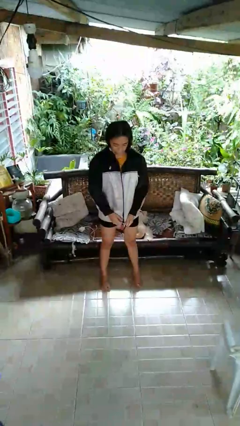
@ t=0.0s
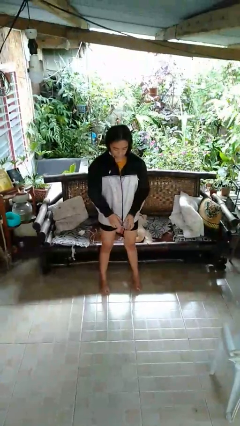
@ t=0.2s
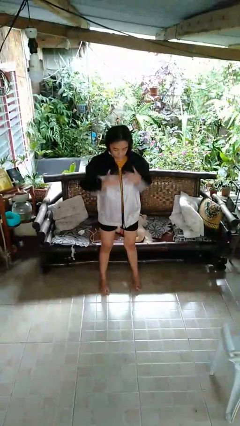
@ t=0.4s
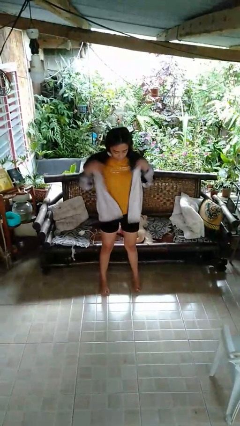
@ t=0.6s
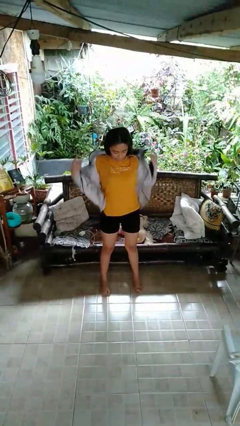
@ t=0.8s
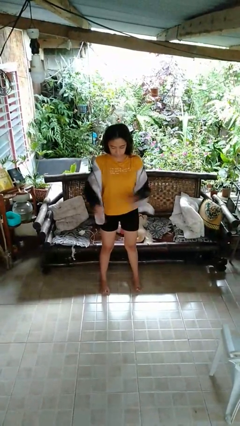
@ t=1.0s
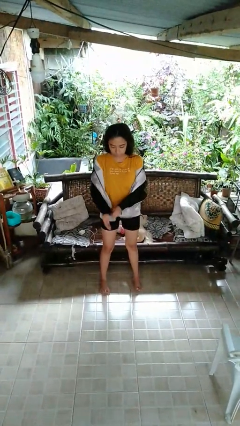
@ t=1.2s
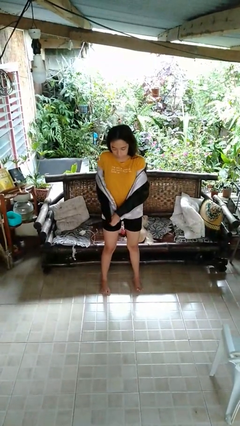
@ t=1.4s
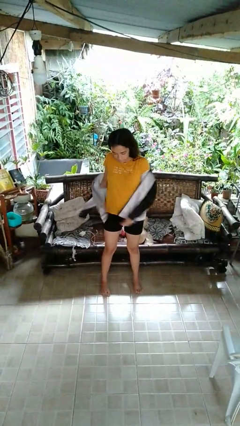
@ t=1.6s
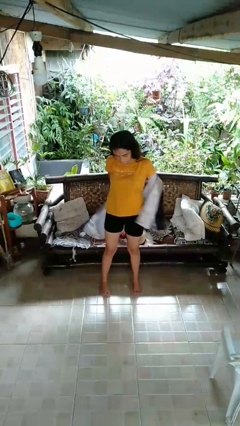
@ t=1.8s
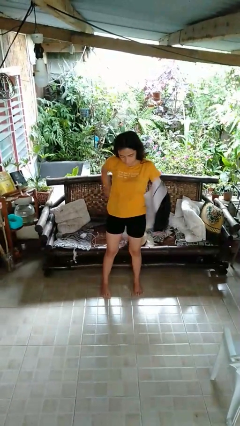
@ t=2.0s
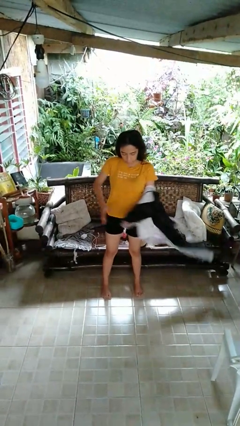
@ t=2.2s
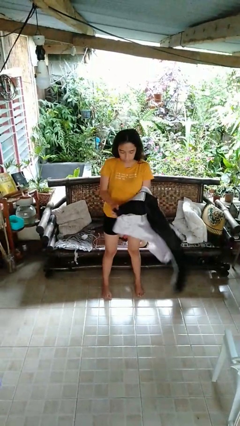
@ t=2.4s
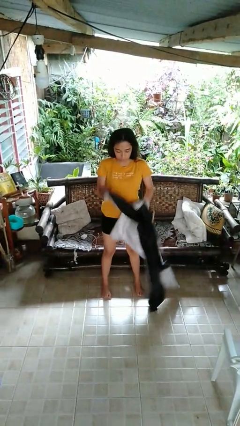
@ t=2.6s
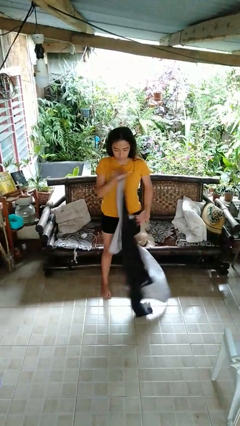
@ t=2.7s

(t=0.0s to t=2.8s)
person takes off jacket

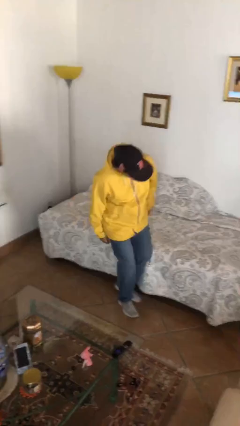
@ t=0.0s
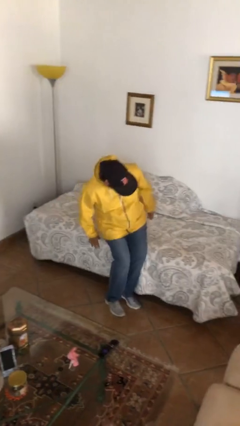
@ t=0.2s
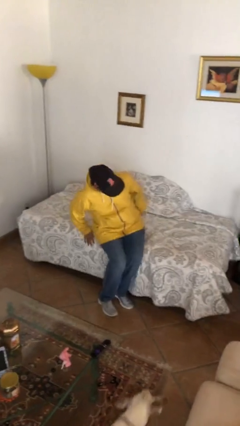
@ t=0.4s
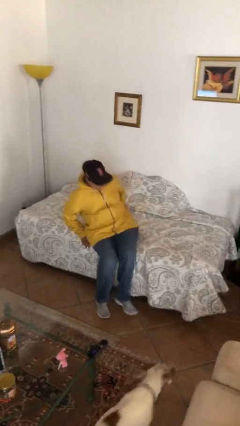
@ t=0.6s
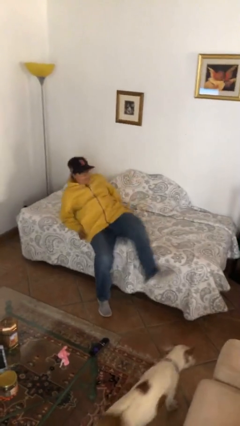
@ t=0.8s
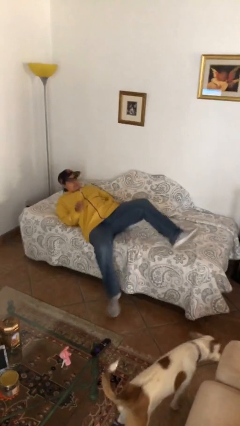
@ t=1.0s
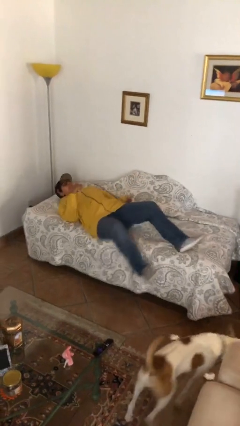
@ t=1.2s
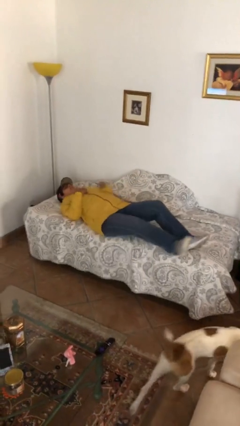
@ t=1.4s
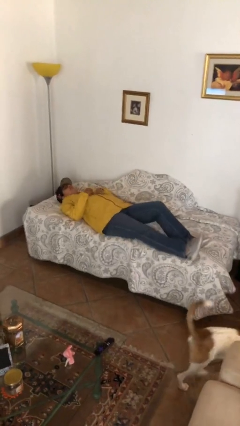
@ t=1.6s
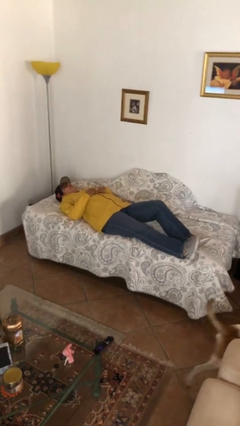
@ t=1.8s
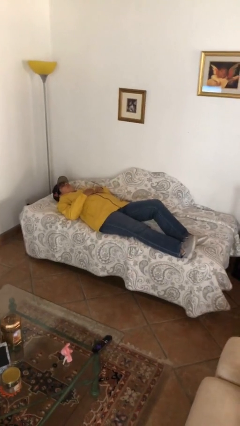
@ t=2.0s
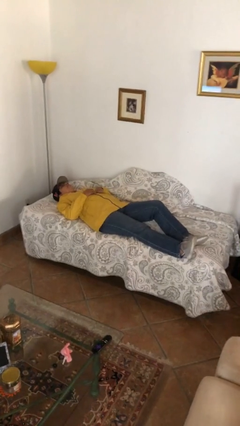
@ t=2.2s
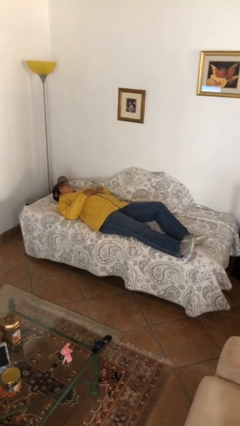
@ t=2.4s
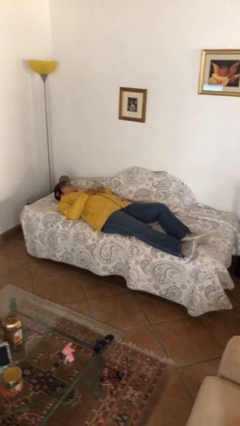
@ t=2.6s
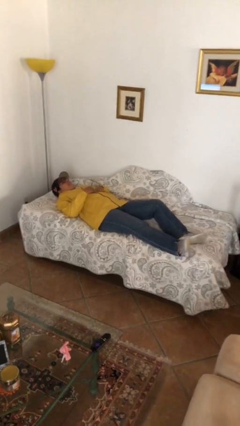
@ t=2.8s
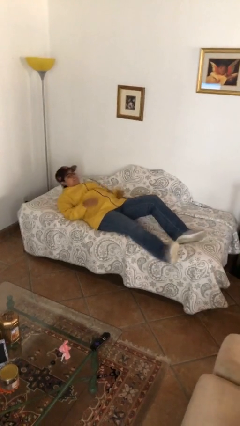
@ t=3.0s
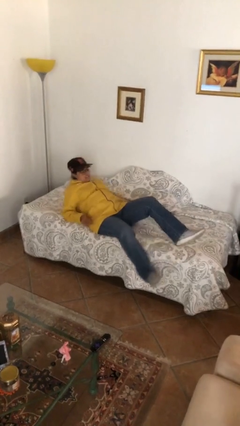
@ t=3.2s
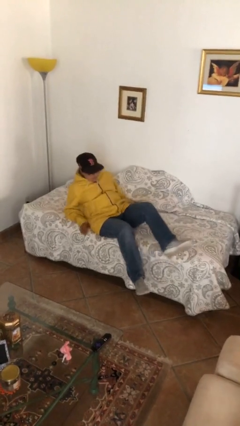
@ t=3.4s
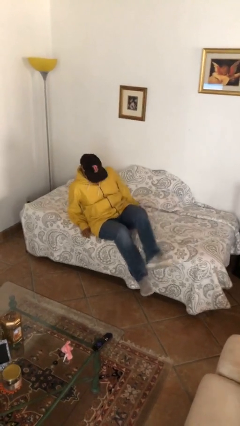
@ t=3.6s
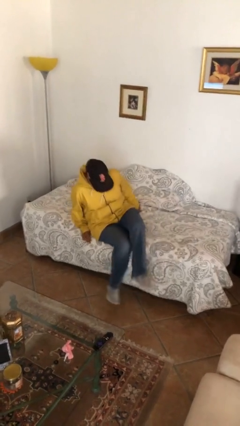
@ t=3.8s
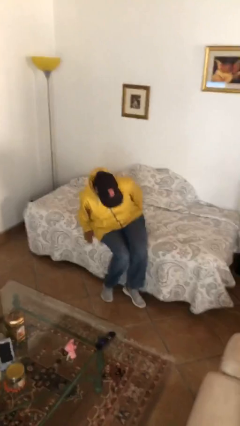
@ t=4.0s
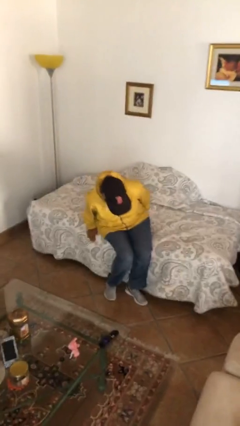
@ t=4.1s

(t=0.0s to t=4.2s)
person lies down on bed

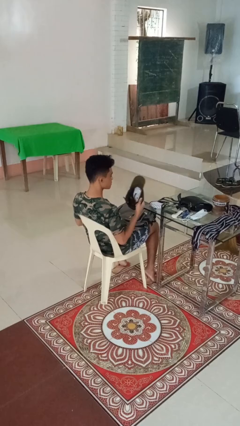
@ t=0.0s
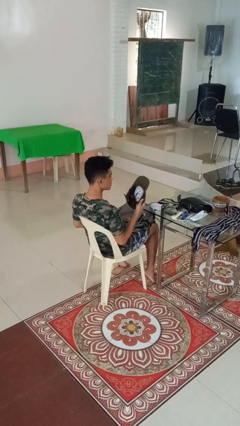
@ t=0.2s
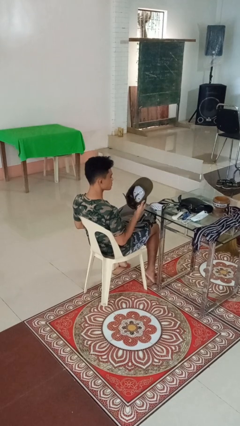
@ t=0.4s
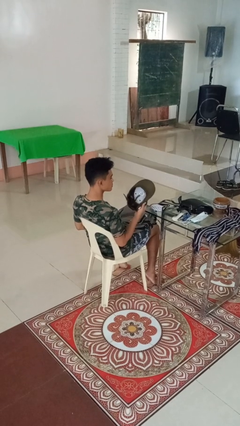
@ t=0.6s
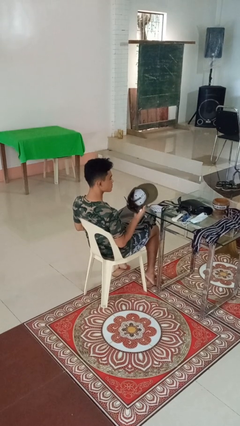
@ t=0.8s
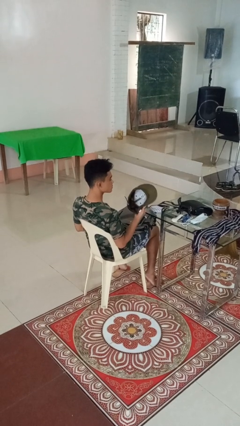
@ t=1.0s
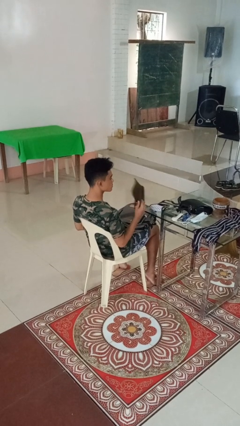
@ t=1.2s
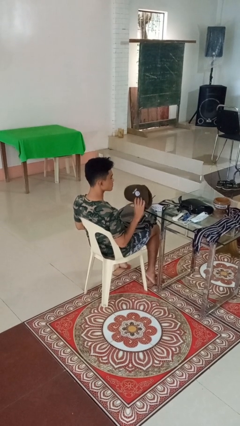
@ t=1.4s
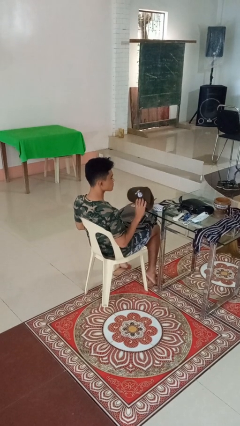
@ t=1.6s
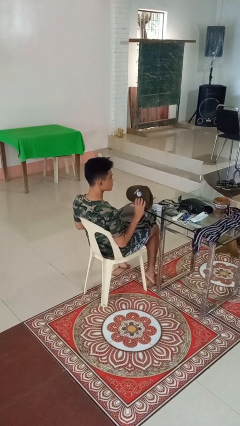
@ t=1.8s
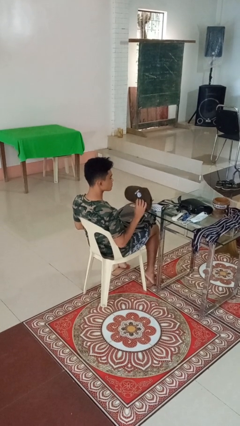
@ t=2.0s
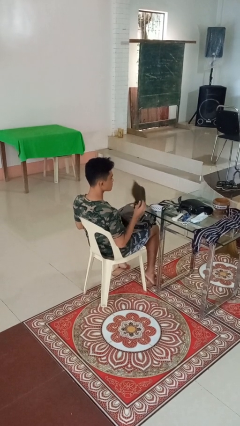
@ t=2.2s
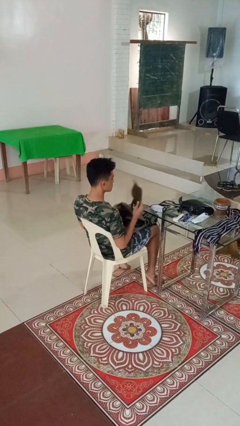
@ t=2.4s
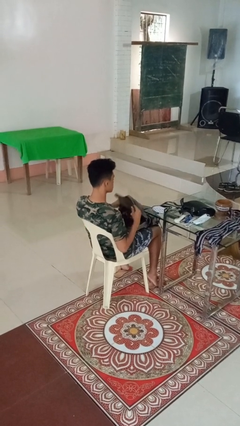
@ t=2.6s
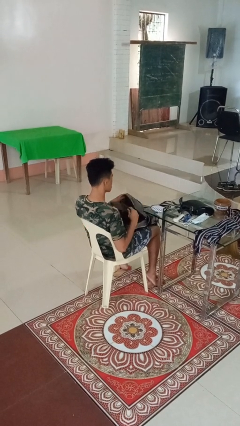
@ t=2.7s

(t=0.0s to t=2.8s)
person takes object from backpack

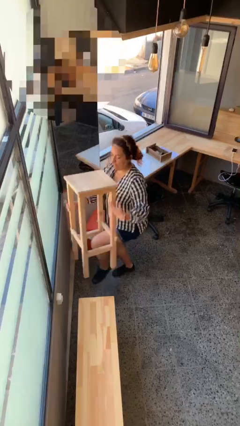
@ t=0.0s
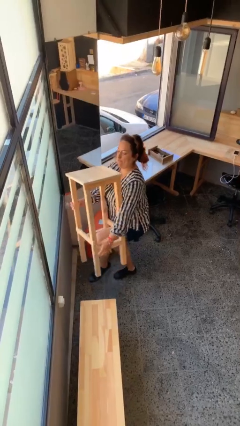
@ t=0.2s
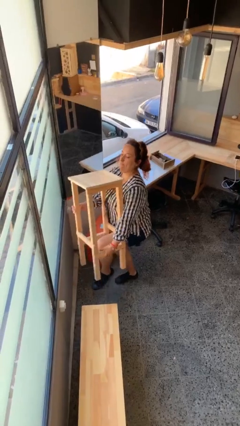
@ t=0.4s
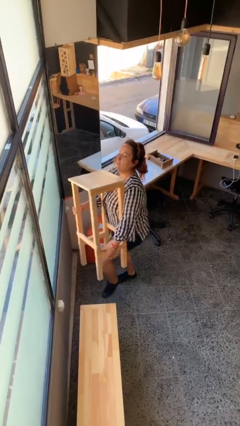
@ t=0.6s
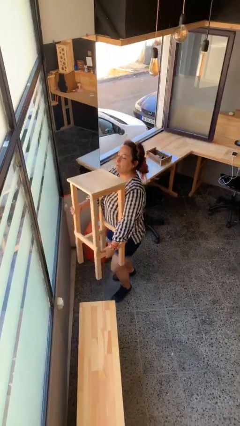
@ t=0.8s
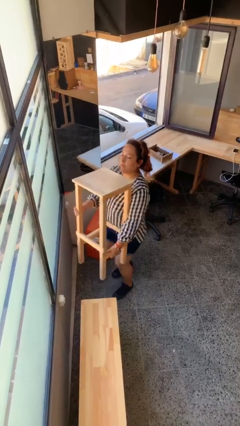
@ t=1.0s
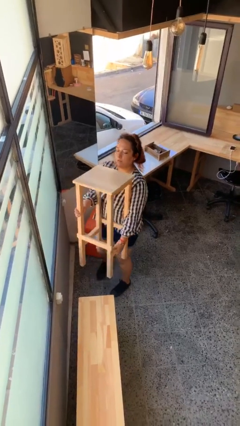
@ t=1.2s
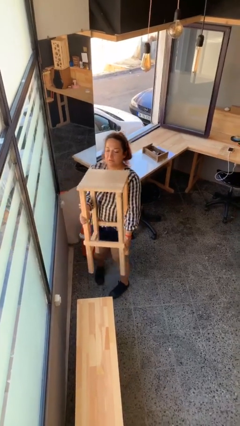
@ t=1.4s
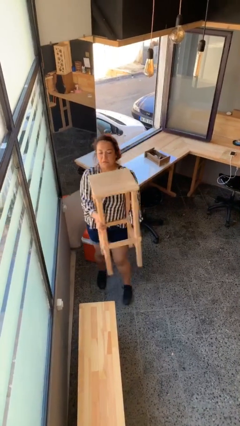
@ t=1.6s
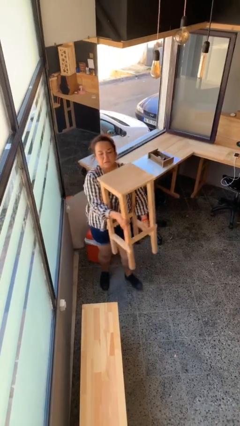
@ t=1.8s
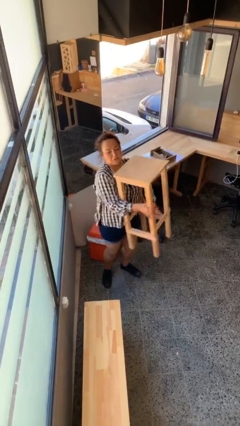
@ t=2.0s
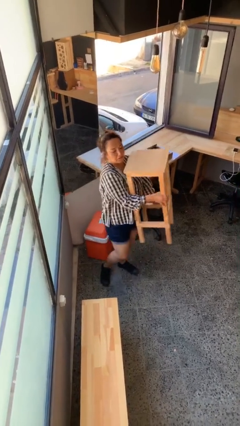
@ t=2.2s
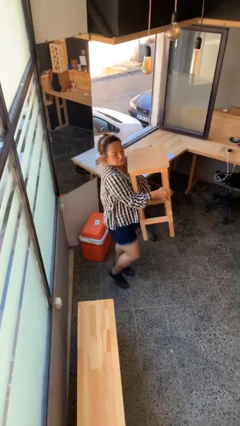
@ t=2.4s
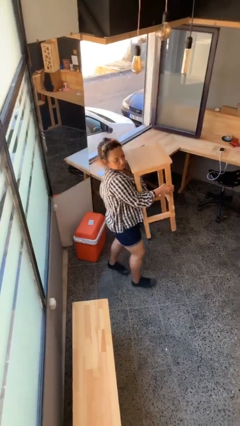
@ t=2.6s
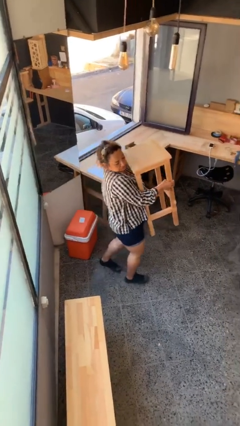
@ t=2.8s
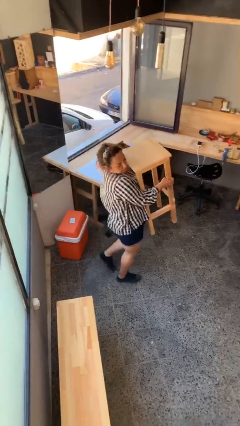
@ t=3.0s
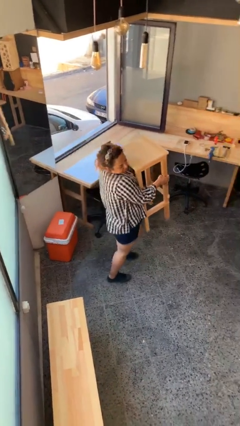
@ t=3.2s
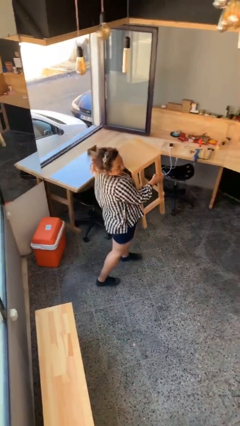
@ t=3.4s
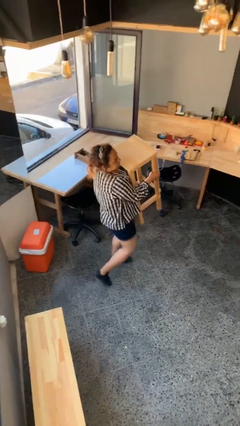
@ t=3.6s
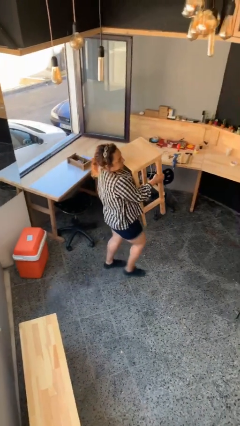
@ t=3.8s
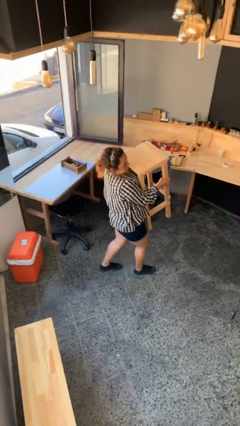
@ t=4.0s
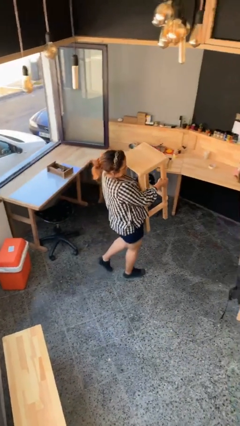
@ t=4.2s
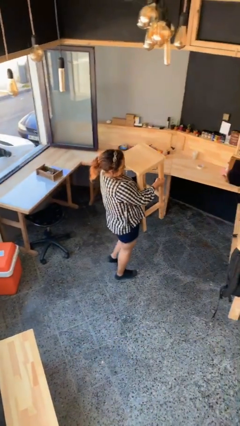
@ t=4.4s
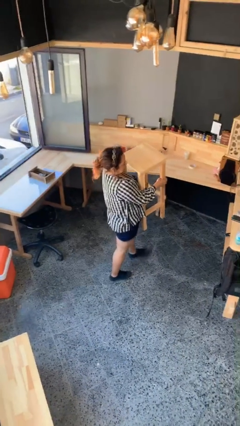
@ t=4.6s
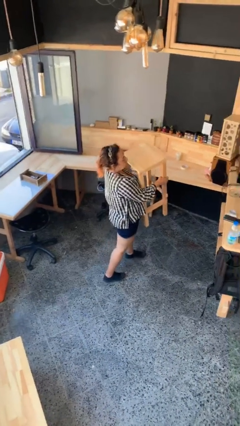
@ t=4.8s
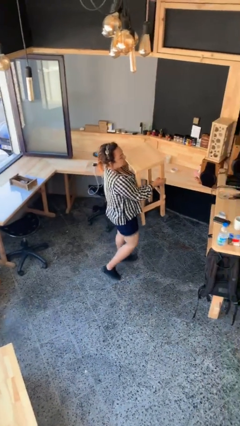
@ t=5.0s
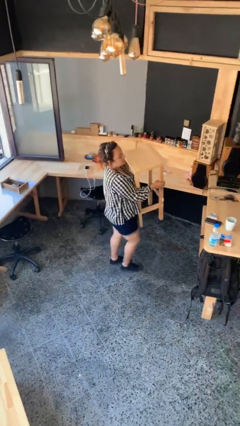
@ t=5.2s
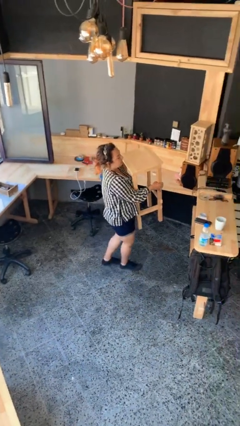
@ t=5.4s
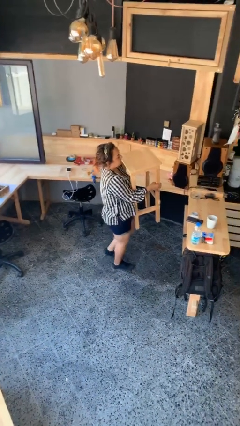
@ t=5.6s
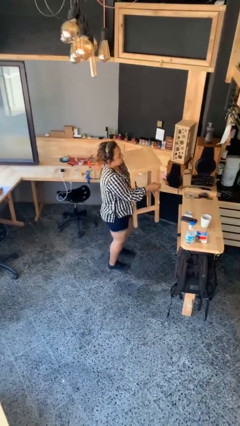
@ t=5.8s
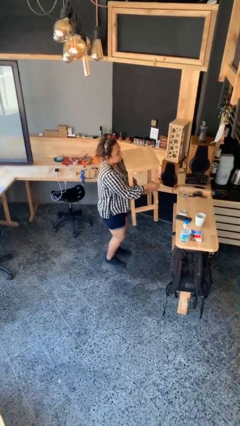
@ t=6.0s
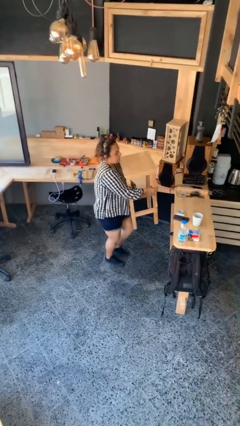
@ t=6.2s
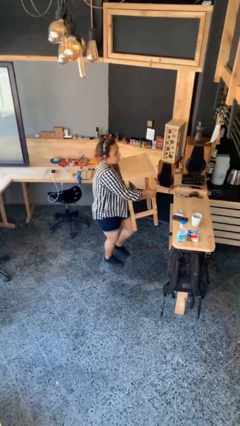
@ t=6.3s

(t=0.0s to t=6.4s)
person carries heavy object

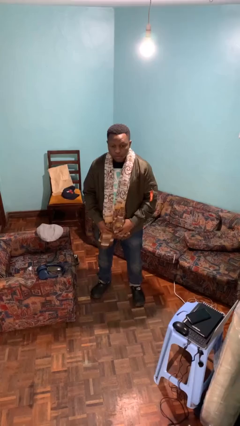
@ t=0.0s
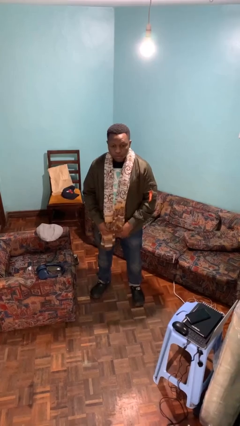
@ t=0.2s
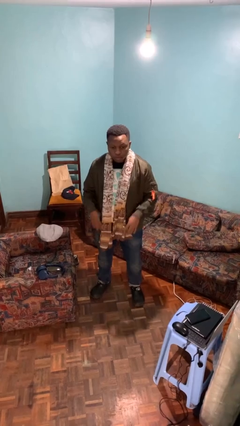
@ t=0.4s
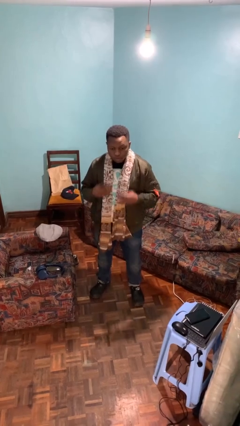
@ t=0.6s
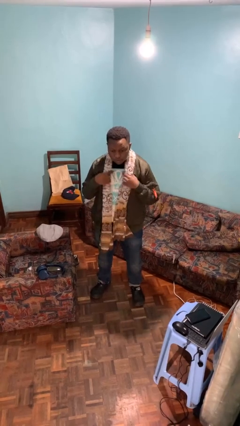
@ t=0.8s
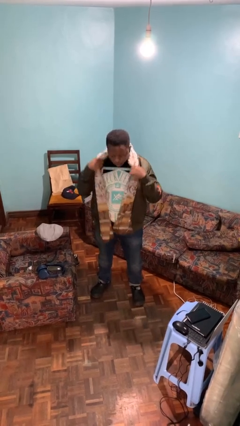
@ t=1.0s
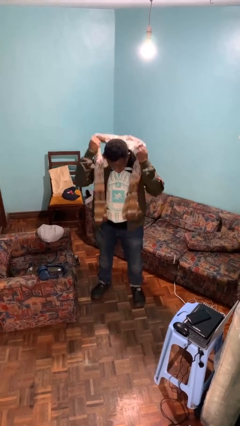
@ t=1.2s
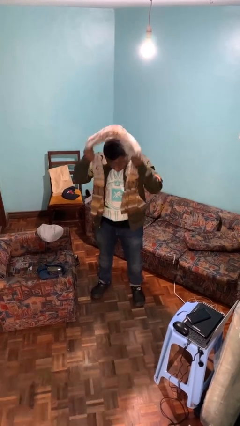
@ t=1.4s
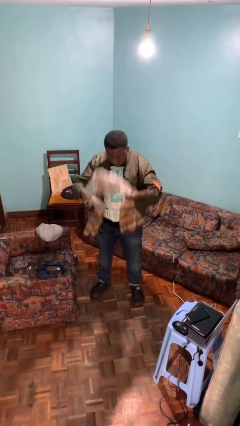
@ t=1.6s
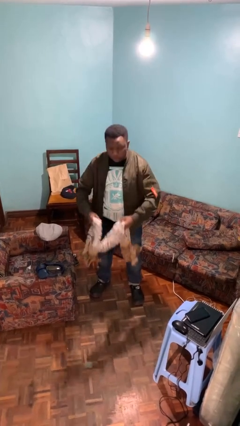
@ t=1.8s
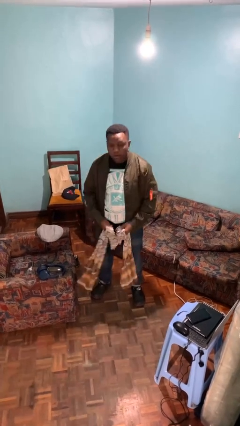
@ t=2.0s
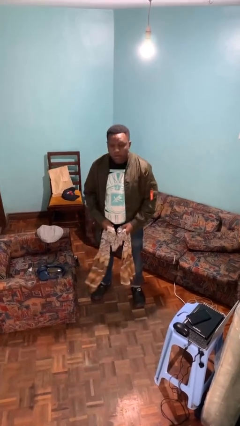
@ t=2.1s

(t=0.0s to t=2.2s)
person takes off scarf
